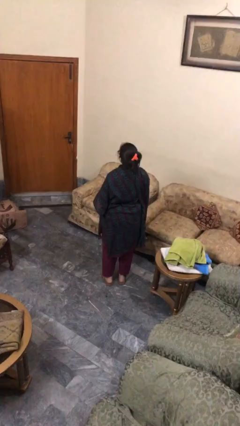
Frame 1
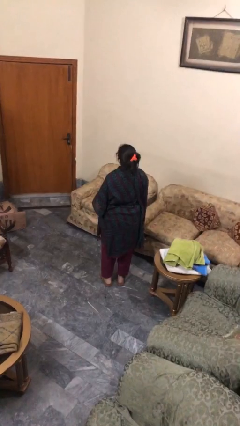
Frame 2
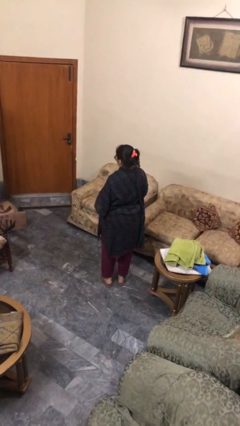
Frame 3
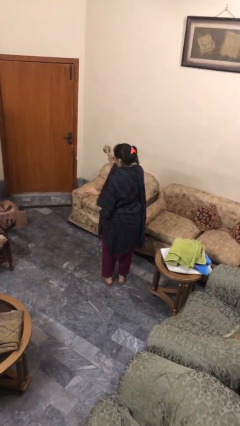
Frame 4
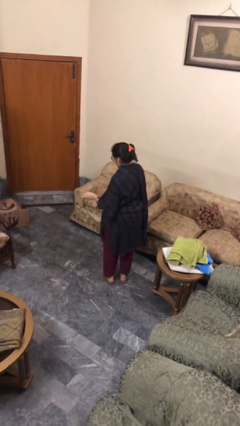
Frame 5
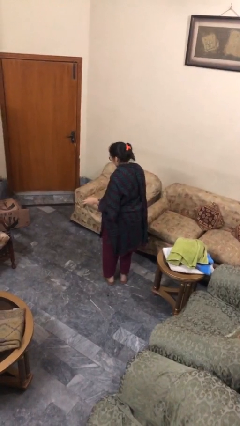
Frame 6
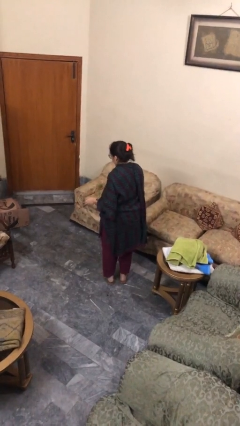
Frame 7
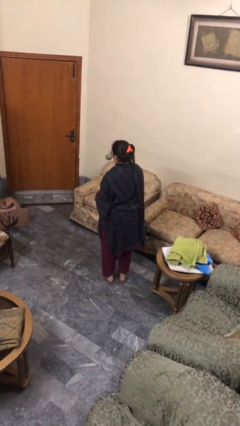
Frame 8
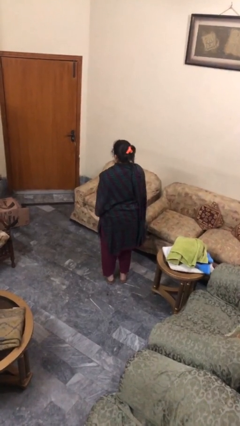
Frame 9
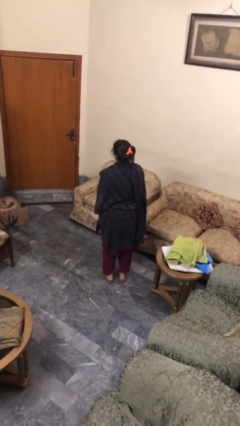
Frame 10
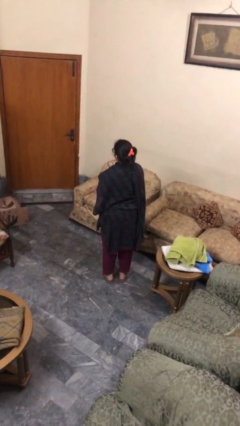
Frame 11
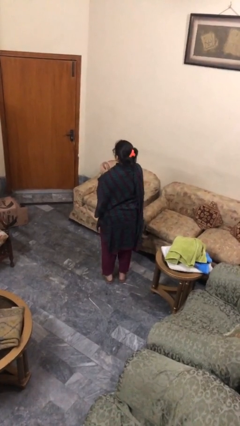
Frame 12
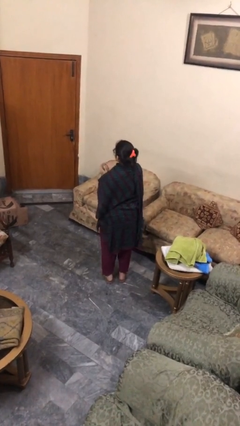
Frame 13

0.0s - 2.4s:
person bounces ball on floor

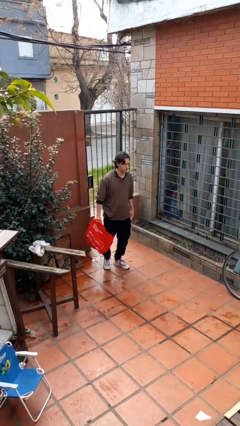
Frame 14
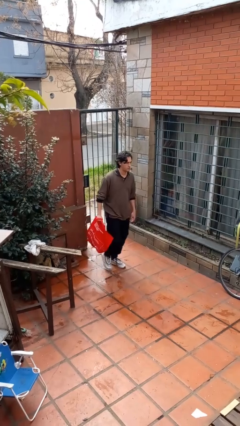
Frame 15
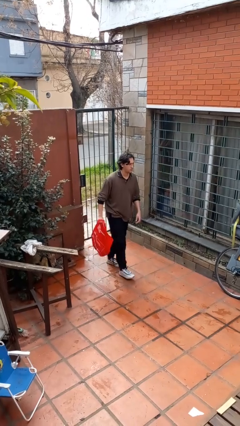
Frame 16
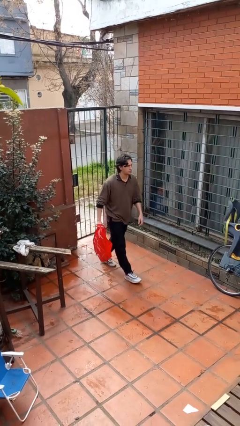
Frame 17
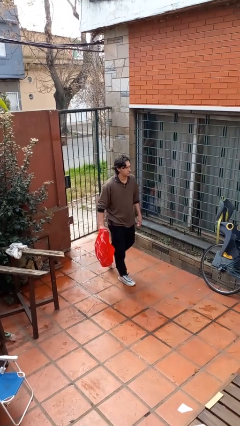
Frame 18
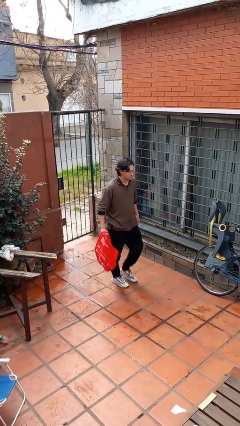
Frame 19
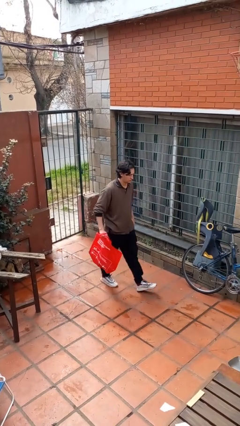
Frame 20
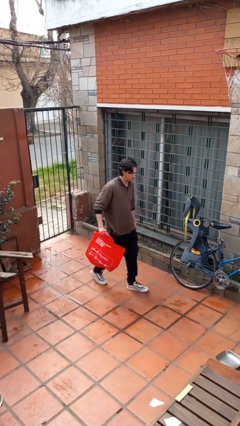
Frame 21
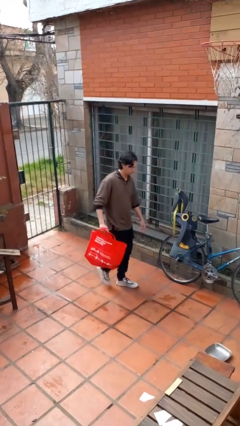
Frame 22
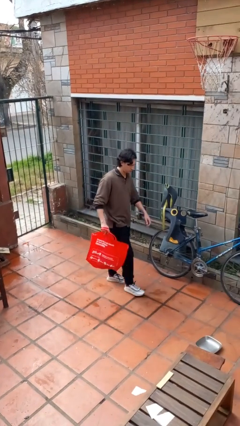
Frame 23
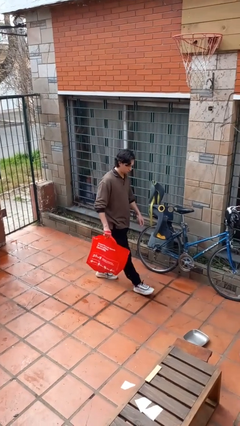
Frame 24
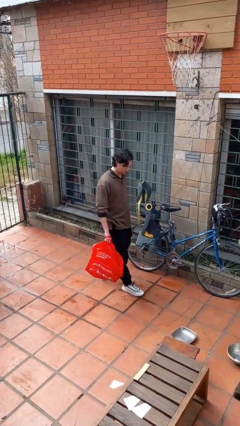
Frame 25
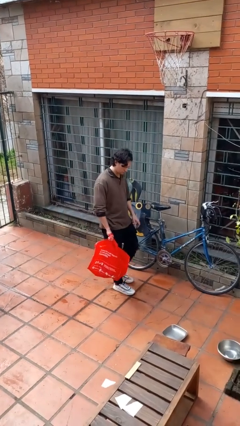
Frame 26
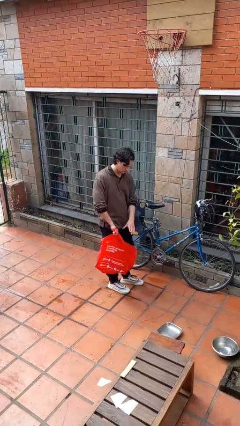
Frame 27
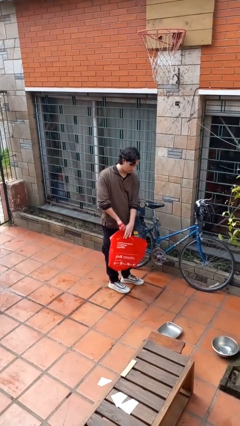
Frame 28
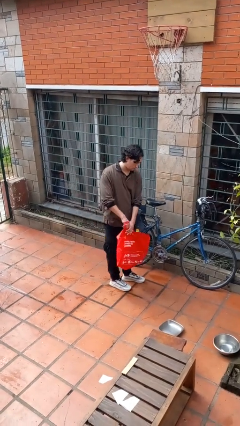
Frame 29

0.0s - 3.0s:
person carries groceries

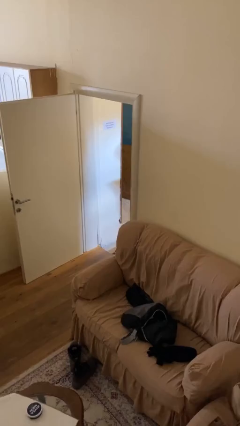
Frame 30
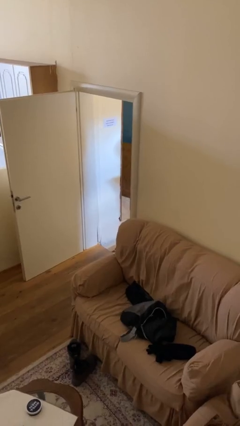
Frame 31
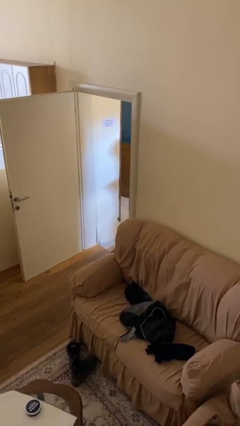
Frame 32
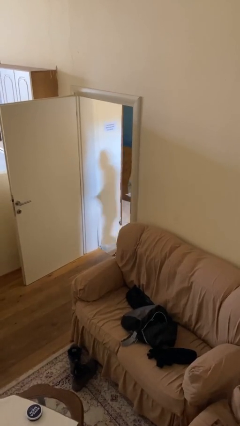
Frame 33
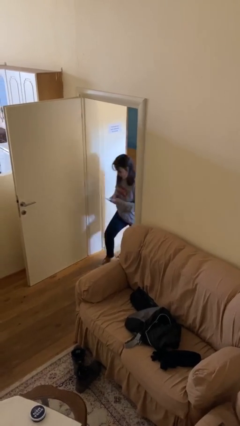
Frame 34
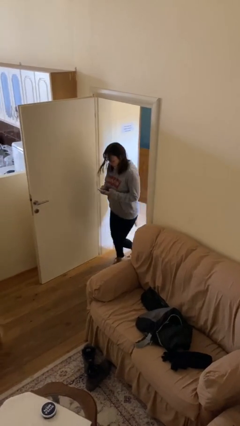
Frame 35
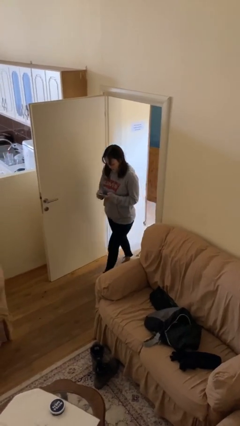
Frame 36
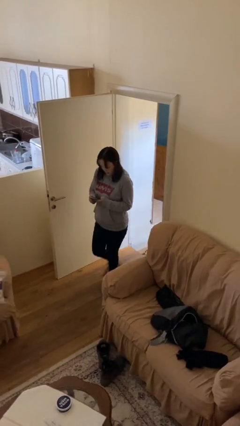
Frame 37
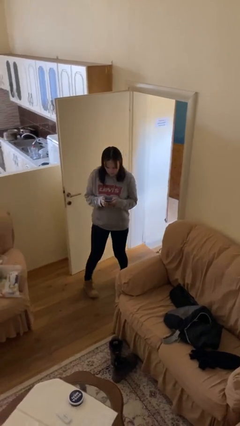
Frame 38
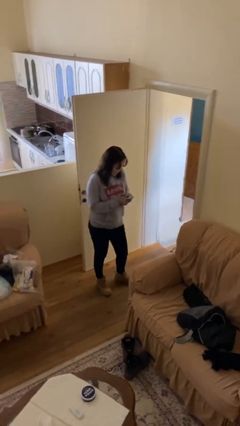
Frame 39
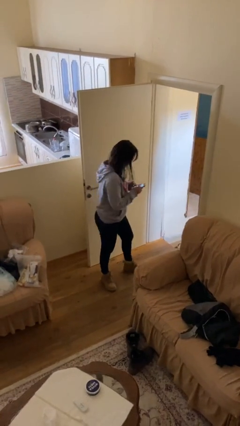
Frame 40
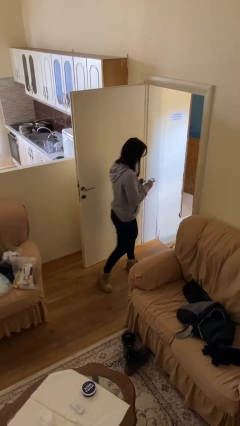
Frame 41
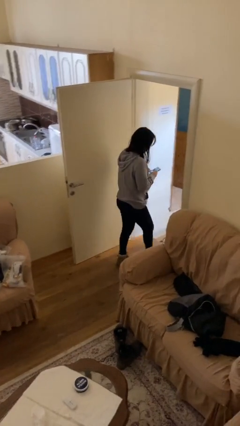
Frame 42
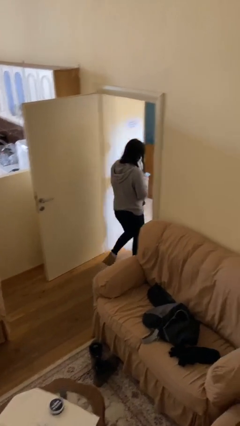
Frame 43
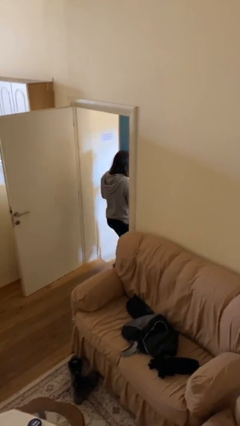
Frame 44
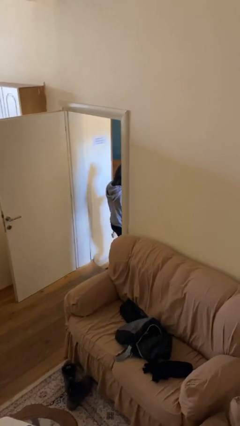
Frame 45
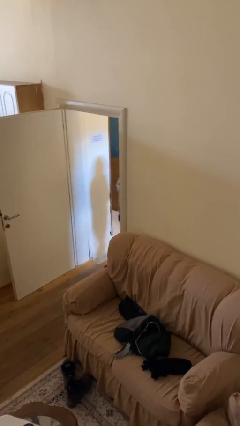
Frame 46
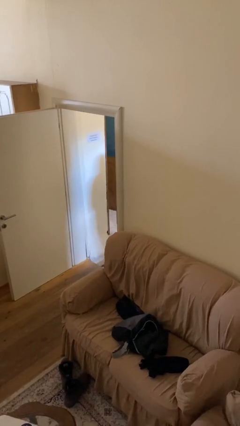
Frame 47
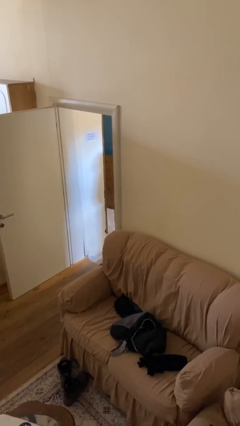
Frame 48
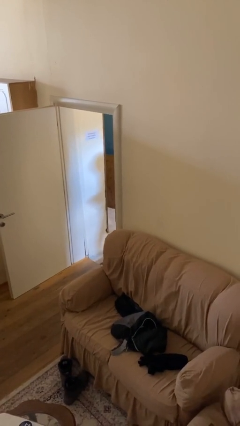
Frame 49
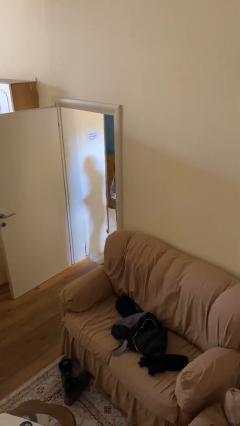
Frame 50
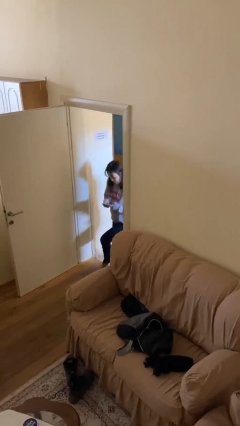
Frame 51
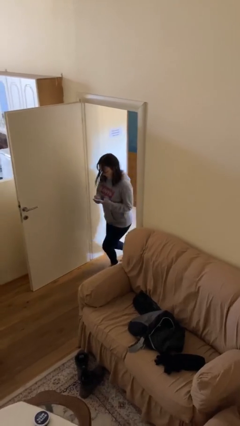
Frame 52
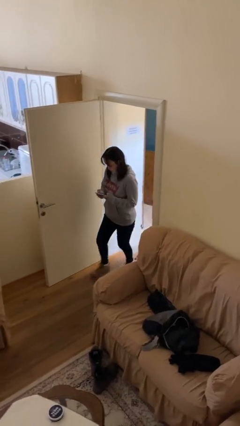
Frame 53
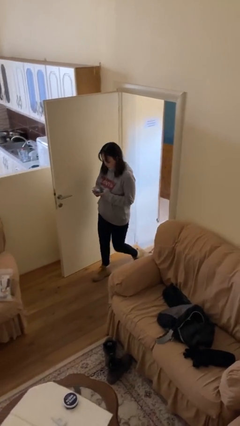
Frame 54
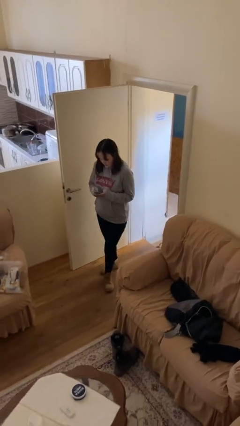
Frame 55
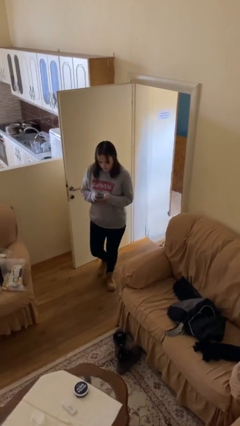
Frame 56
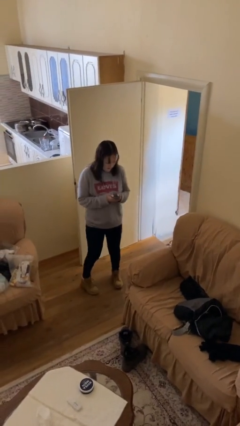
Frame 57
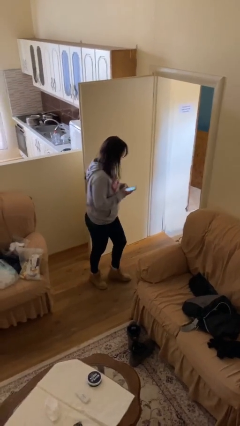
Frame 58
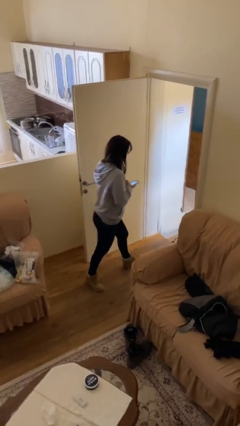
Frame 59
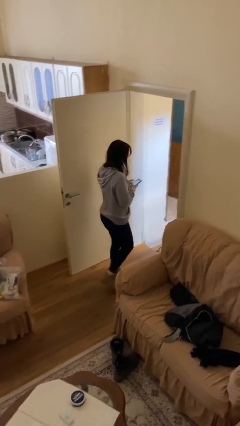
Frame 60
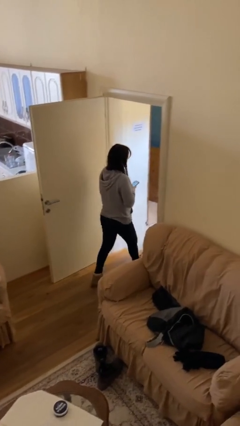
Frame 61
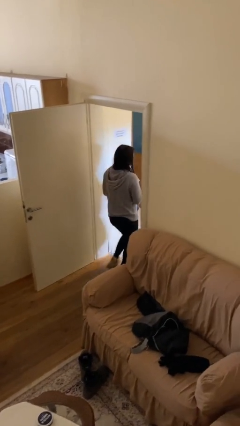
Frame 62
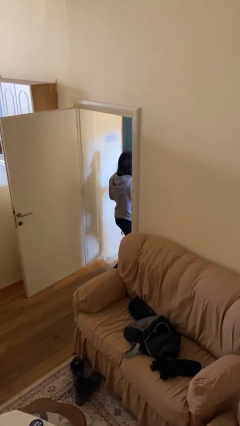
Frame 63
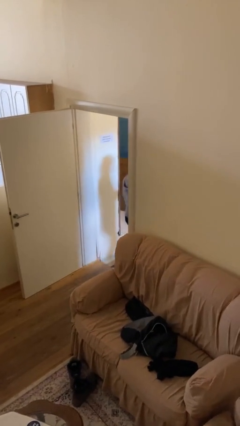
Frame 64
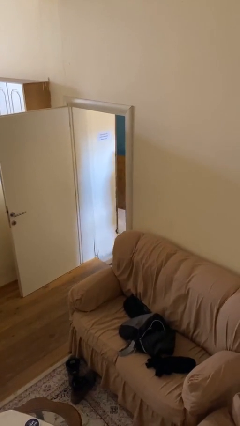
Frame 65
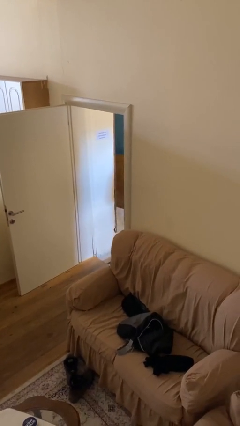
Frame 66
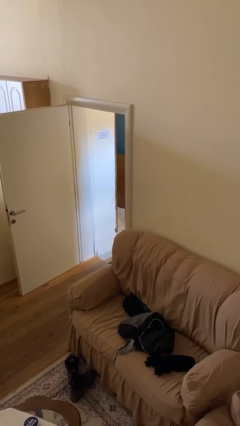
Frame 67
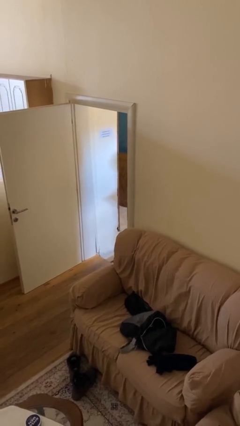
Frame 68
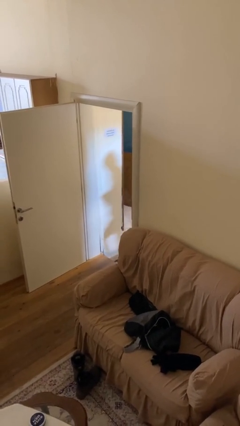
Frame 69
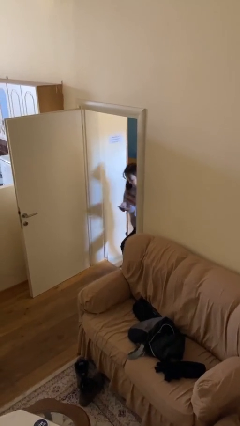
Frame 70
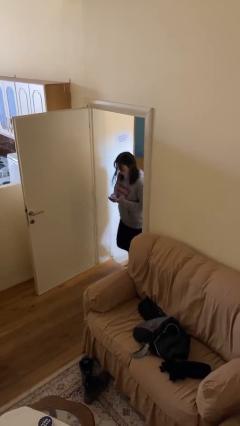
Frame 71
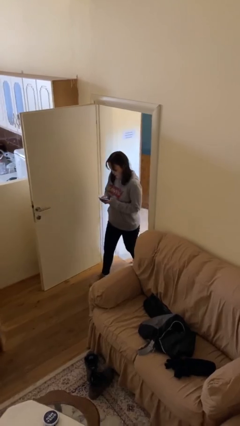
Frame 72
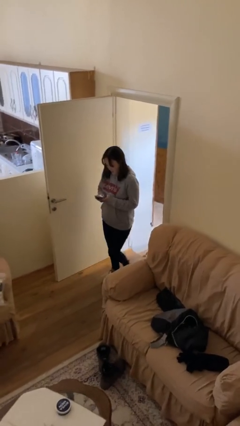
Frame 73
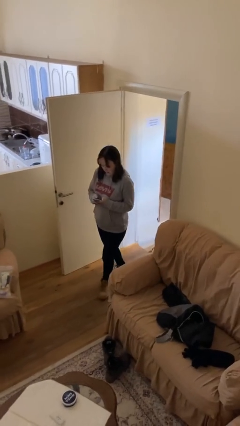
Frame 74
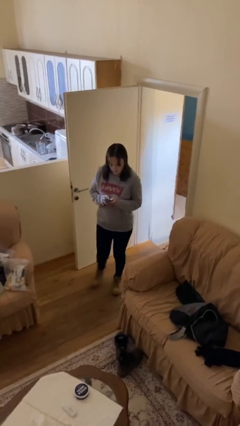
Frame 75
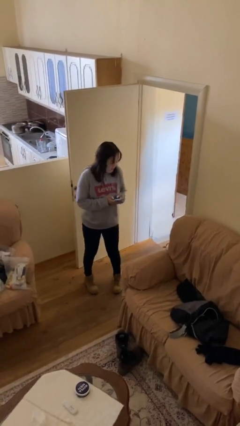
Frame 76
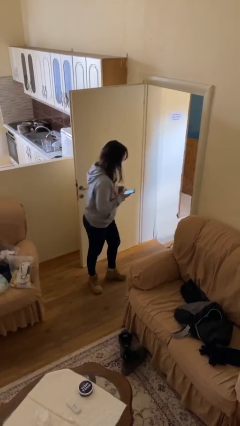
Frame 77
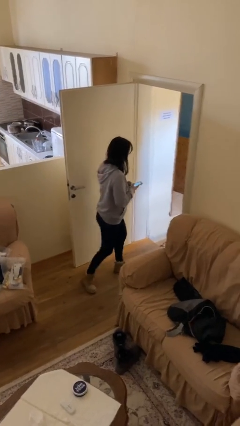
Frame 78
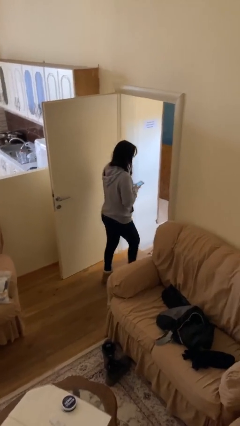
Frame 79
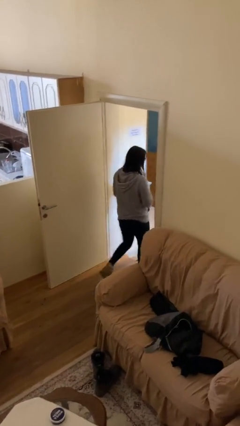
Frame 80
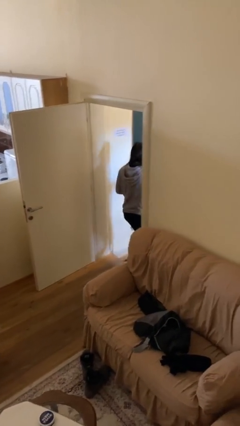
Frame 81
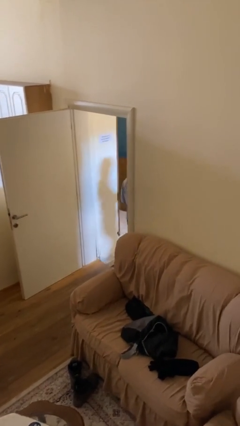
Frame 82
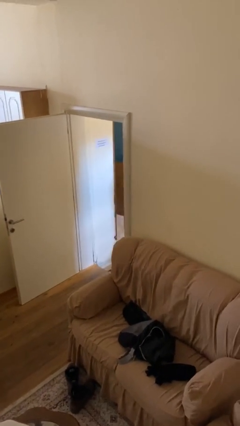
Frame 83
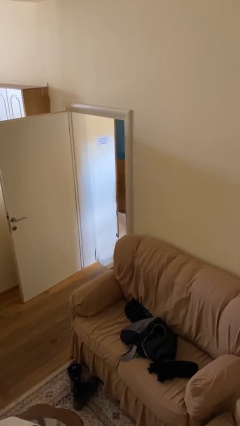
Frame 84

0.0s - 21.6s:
person texts on phone

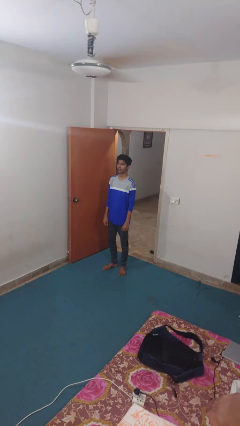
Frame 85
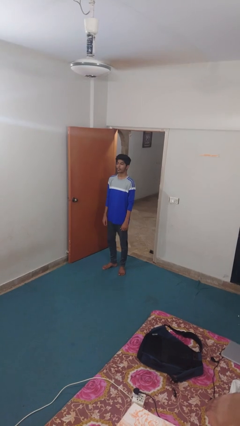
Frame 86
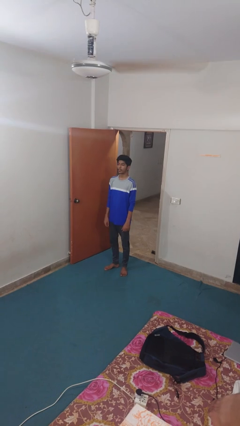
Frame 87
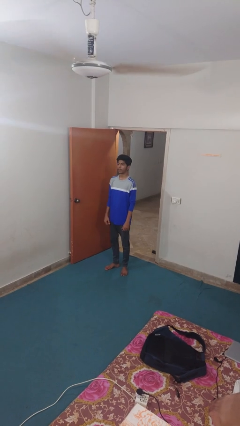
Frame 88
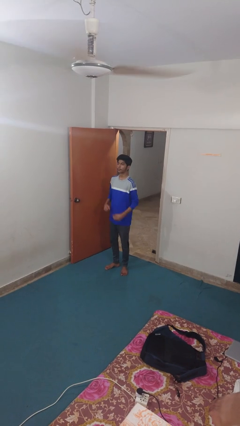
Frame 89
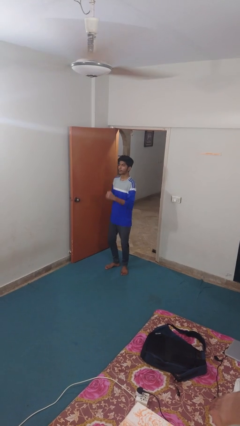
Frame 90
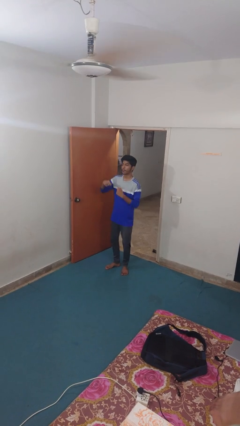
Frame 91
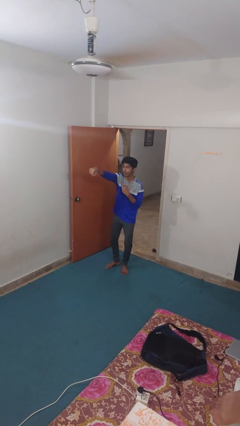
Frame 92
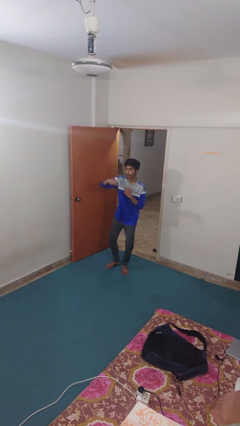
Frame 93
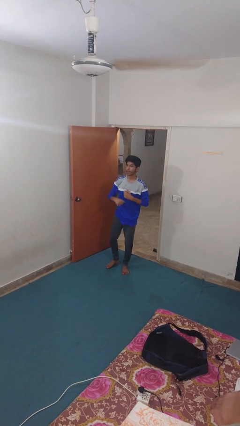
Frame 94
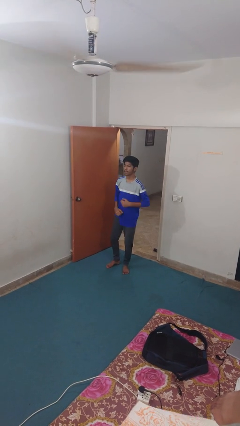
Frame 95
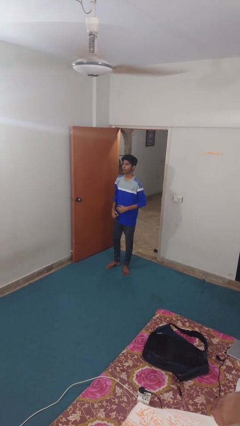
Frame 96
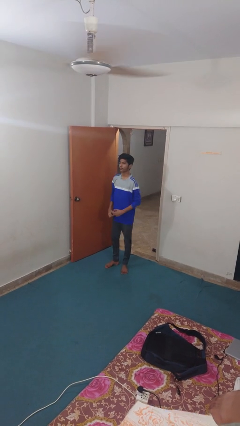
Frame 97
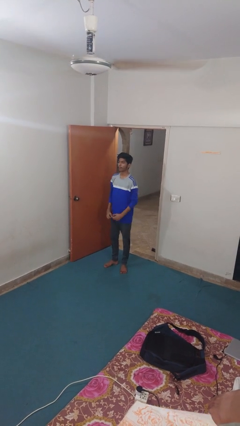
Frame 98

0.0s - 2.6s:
person punches
